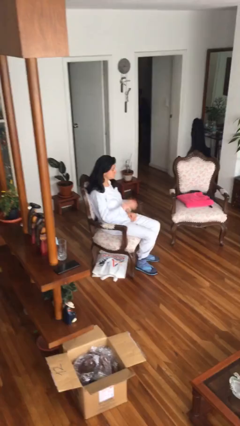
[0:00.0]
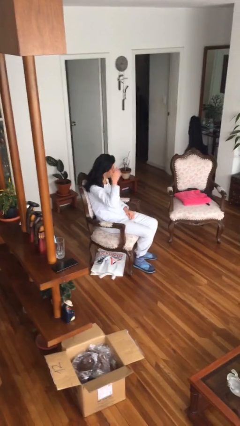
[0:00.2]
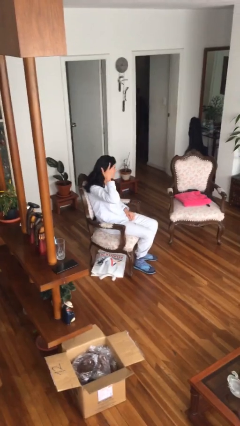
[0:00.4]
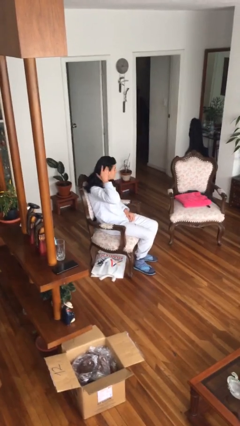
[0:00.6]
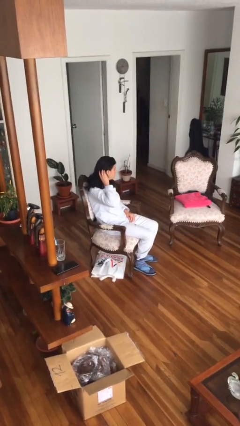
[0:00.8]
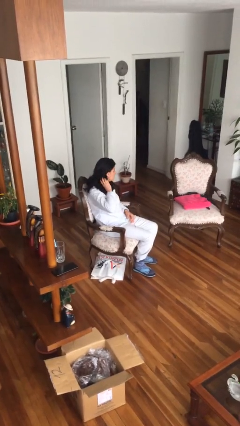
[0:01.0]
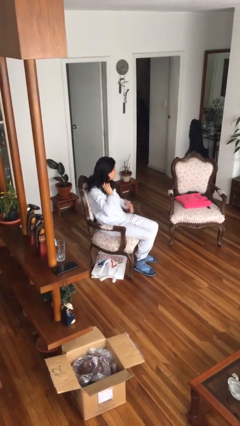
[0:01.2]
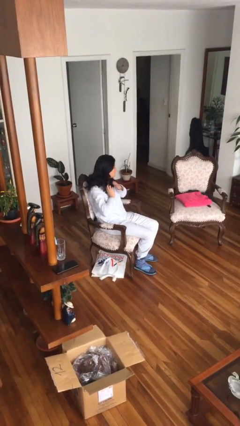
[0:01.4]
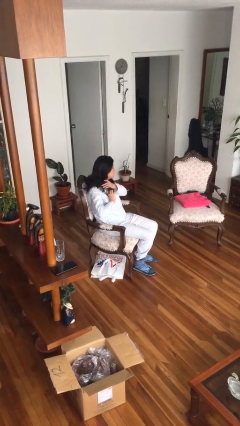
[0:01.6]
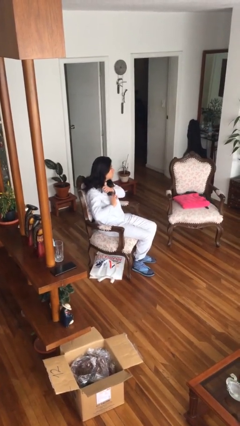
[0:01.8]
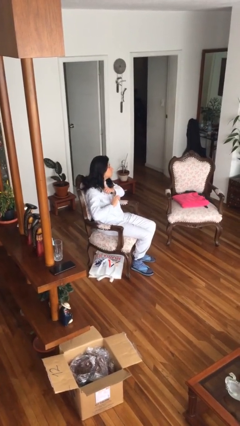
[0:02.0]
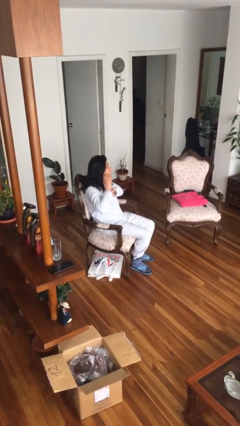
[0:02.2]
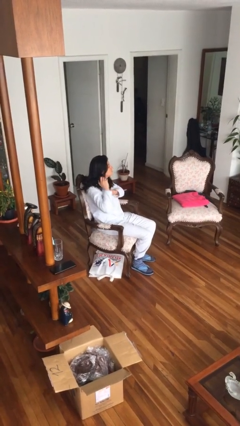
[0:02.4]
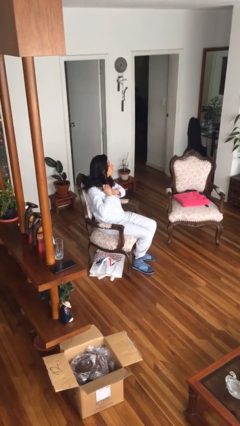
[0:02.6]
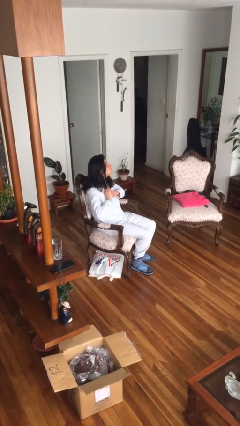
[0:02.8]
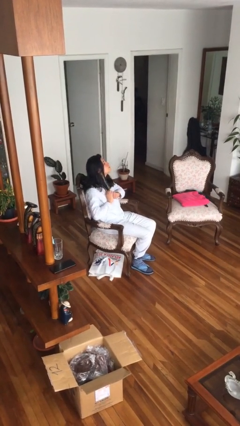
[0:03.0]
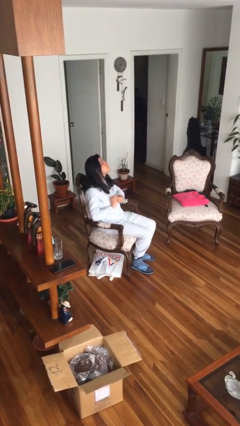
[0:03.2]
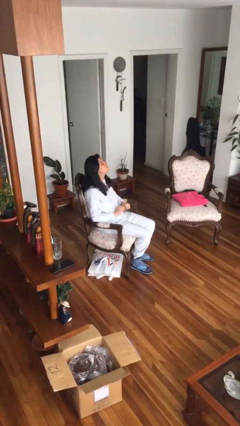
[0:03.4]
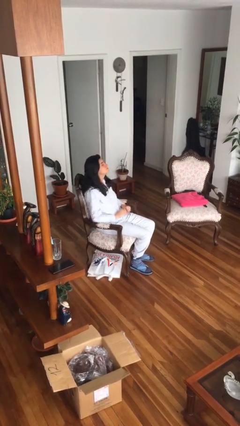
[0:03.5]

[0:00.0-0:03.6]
person strokes hair

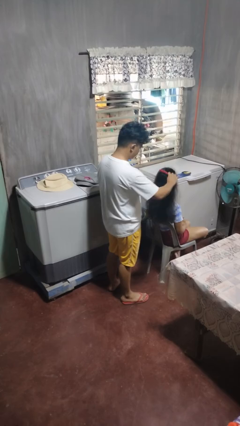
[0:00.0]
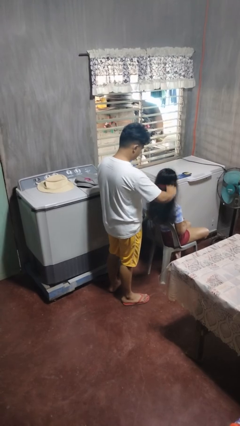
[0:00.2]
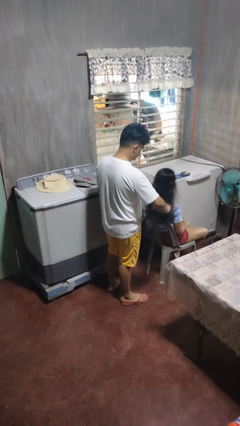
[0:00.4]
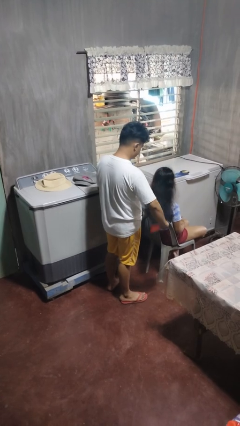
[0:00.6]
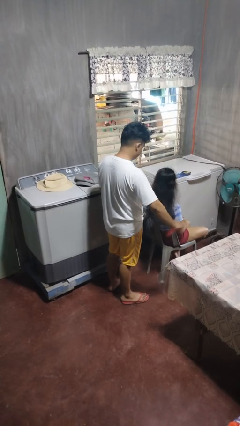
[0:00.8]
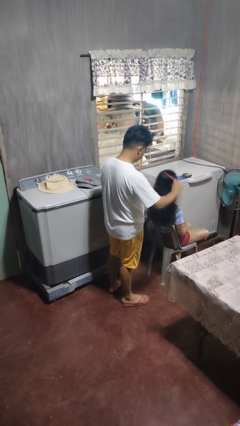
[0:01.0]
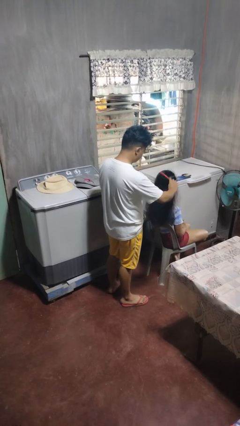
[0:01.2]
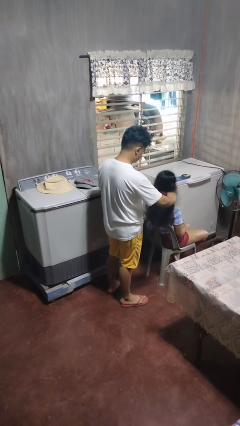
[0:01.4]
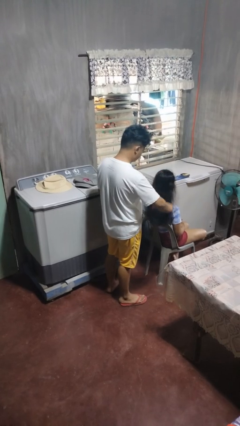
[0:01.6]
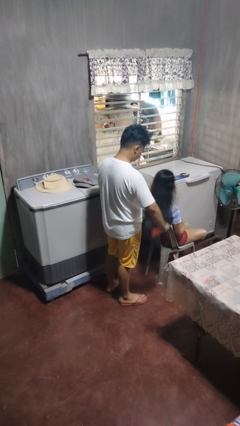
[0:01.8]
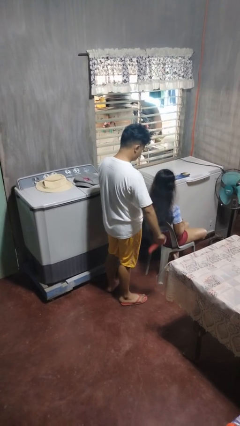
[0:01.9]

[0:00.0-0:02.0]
person brushes hair of person

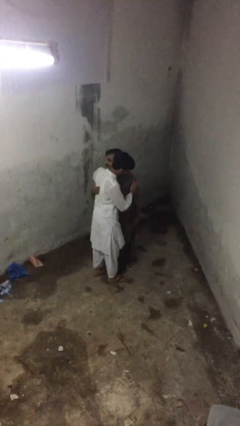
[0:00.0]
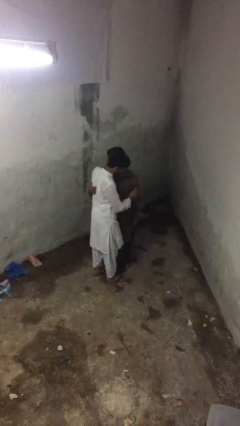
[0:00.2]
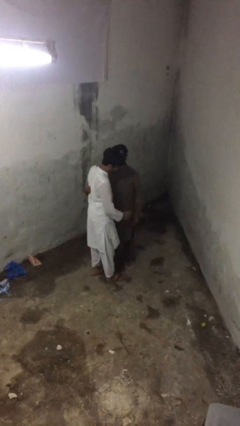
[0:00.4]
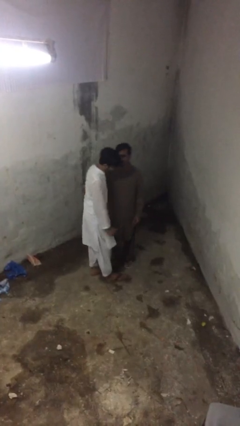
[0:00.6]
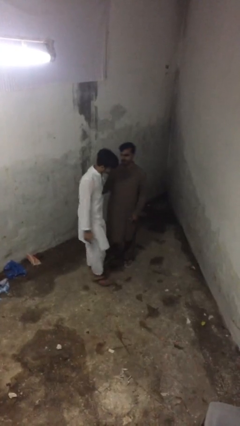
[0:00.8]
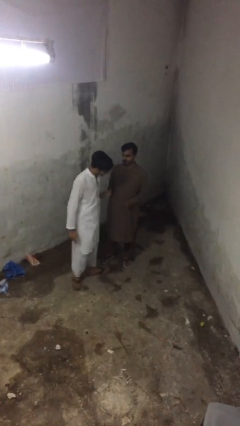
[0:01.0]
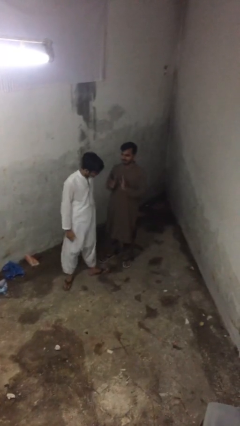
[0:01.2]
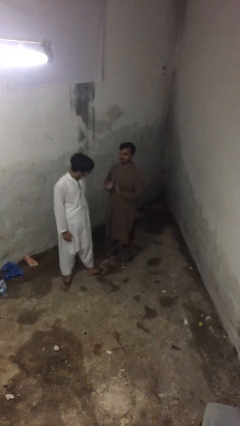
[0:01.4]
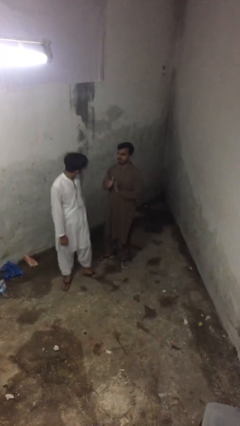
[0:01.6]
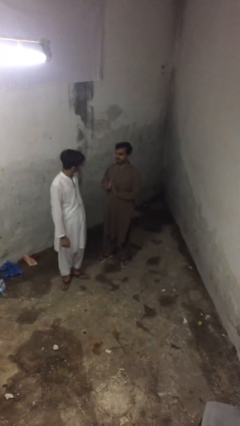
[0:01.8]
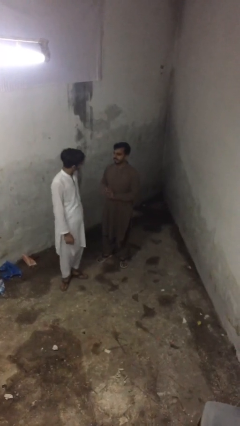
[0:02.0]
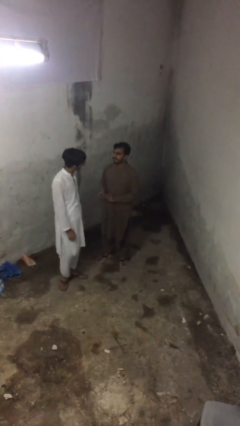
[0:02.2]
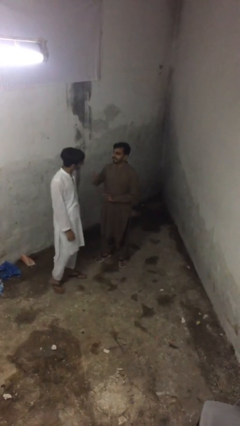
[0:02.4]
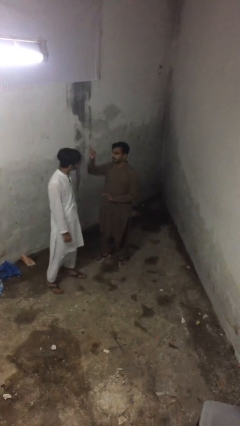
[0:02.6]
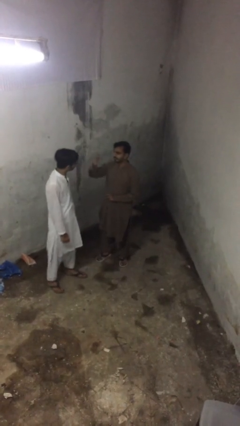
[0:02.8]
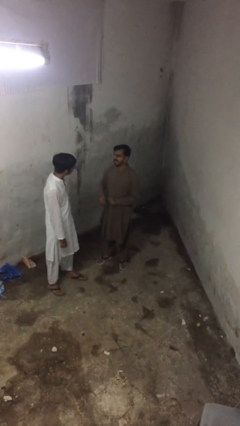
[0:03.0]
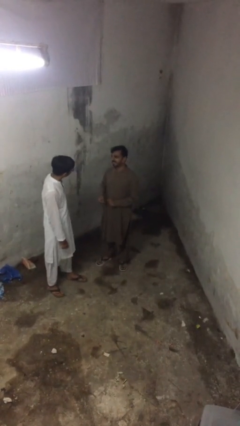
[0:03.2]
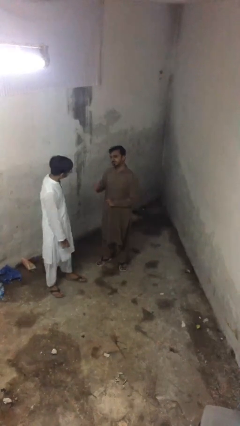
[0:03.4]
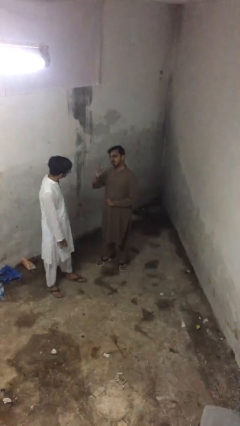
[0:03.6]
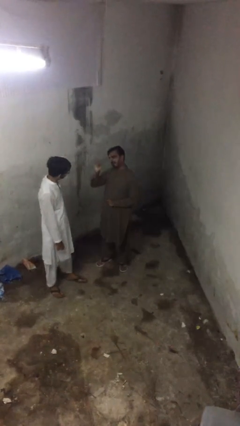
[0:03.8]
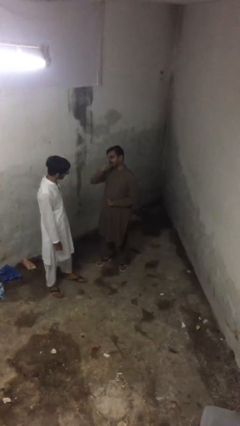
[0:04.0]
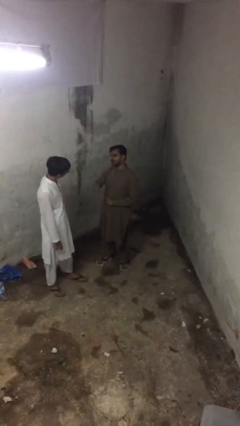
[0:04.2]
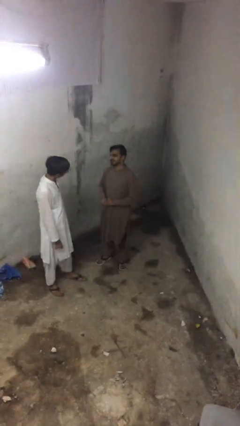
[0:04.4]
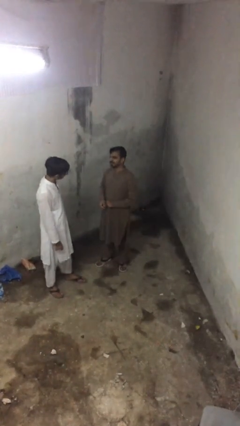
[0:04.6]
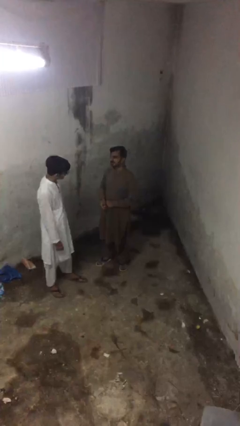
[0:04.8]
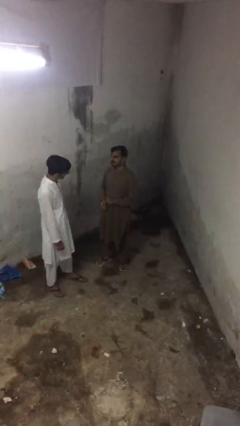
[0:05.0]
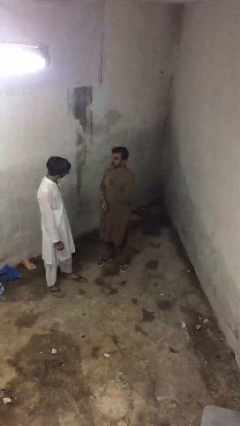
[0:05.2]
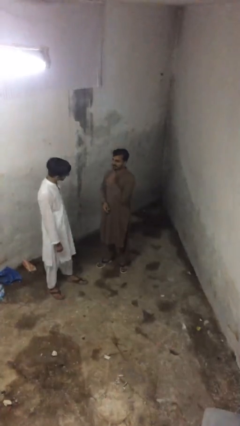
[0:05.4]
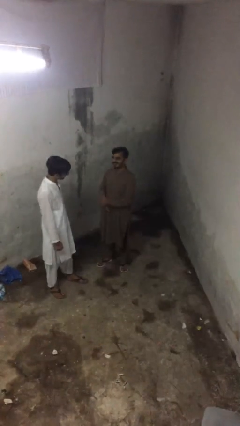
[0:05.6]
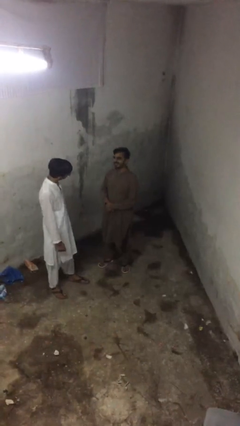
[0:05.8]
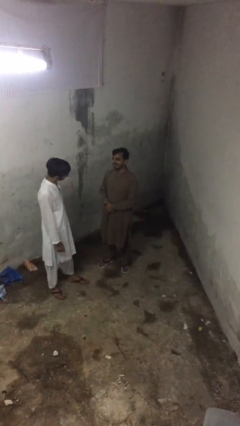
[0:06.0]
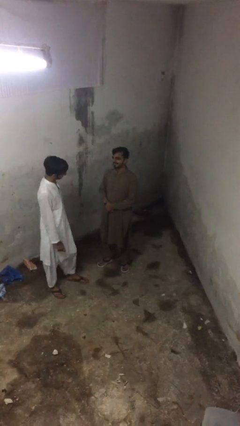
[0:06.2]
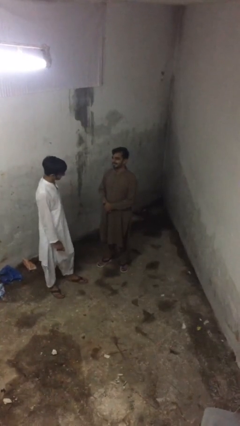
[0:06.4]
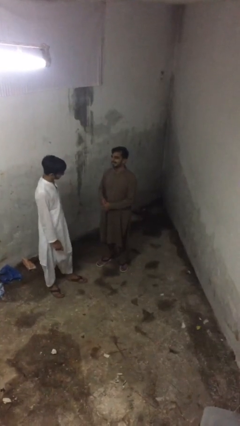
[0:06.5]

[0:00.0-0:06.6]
person talks to person

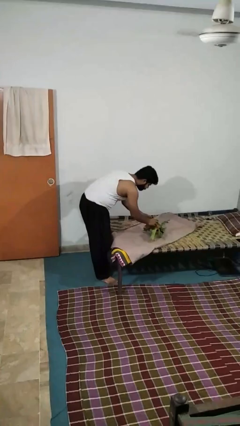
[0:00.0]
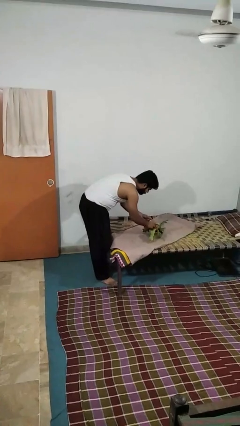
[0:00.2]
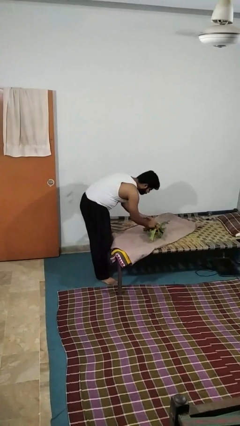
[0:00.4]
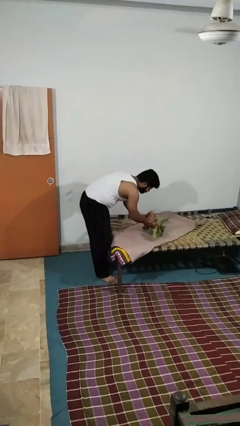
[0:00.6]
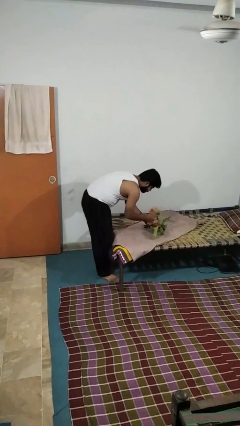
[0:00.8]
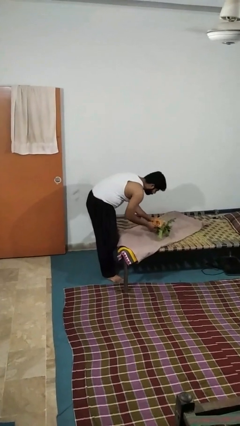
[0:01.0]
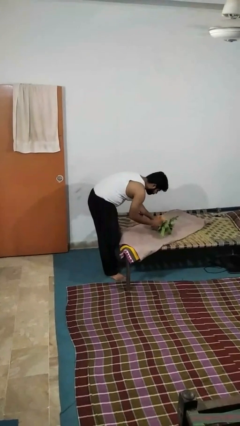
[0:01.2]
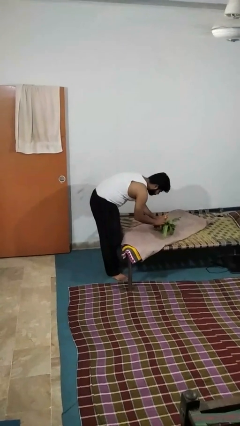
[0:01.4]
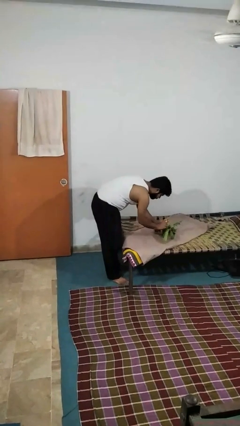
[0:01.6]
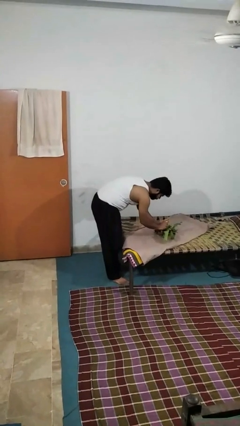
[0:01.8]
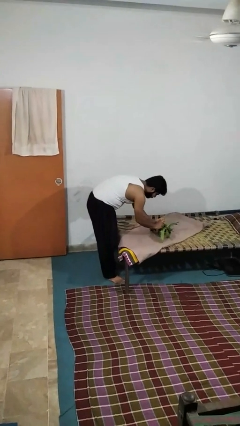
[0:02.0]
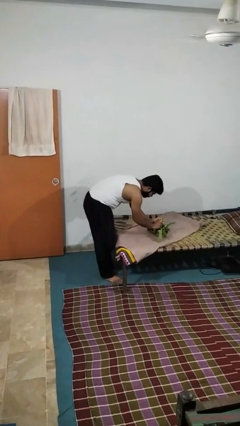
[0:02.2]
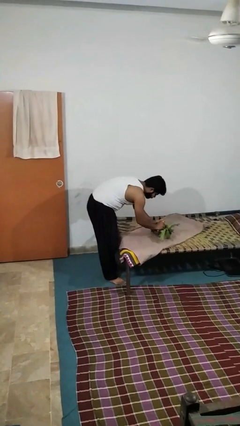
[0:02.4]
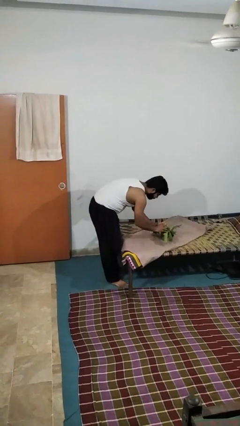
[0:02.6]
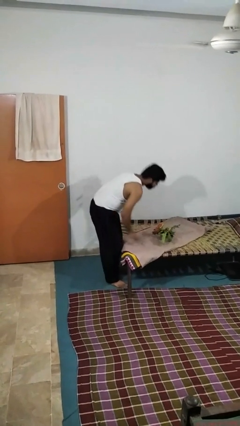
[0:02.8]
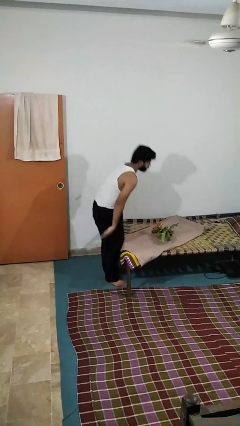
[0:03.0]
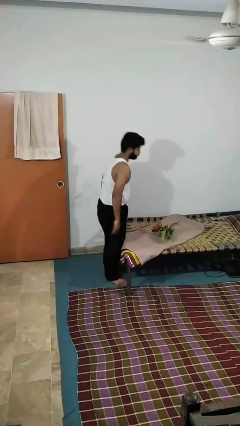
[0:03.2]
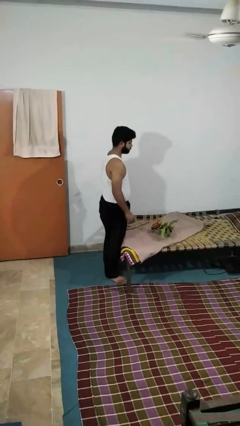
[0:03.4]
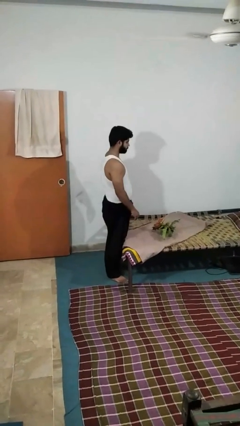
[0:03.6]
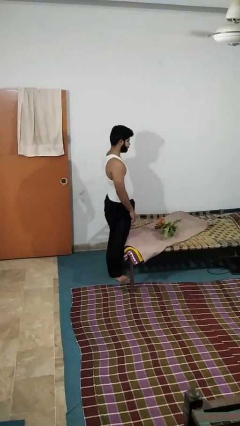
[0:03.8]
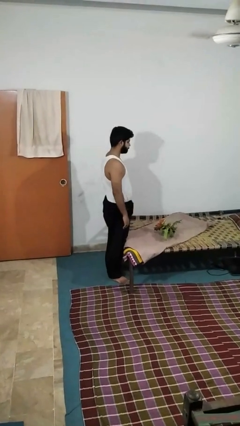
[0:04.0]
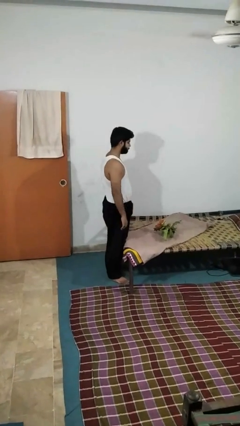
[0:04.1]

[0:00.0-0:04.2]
person arranges flowers in vase

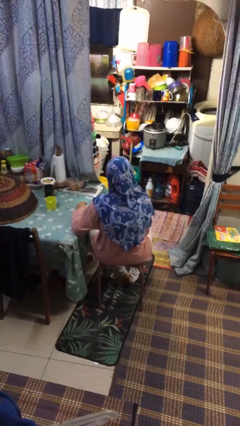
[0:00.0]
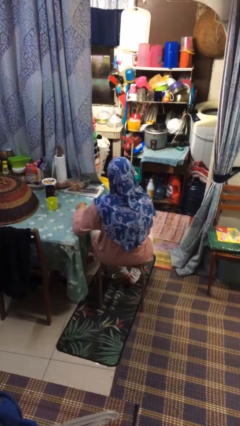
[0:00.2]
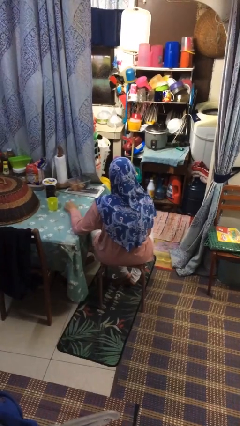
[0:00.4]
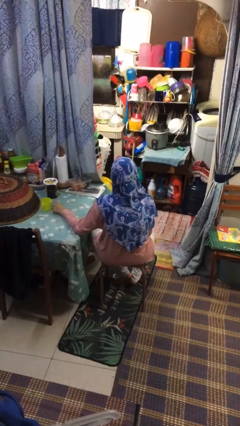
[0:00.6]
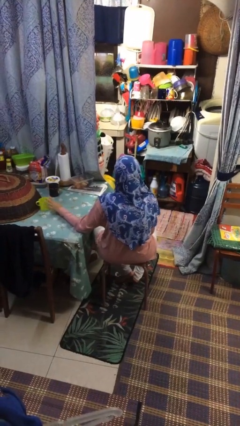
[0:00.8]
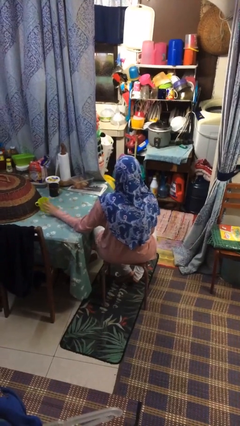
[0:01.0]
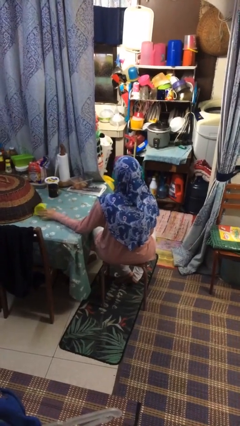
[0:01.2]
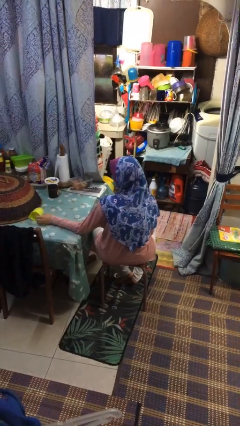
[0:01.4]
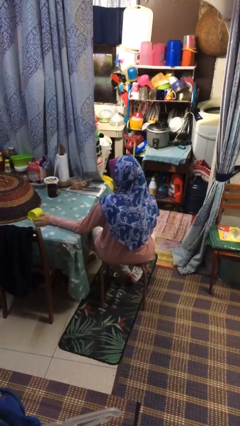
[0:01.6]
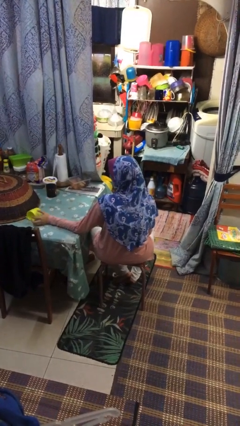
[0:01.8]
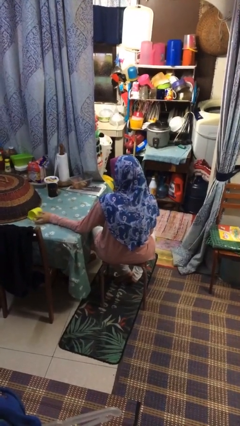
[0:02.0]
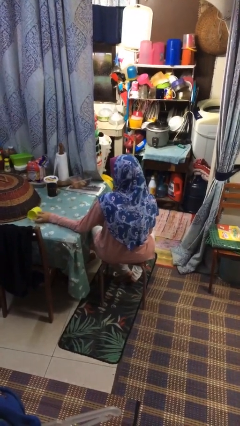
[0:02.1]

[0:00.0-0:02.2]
person knocks over glass
